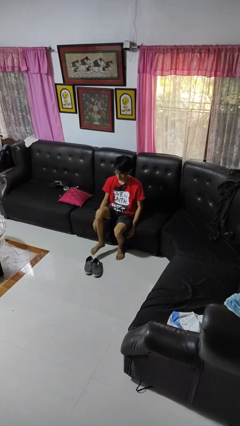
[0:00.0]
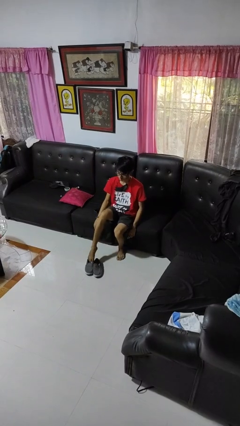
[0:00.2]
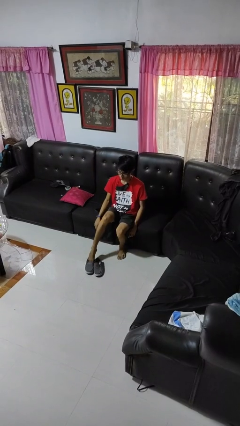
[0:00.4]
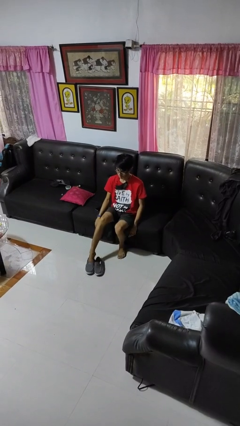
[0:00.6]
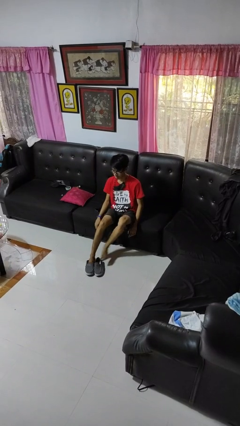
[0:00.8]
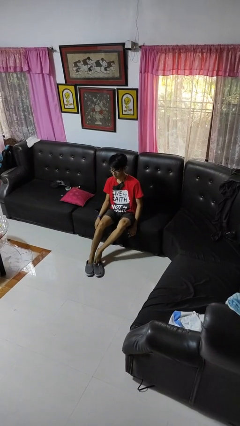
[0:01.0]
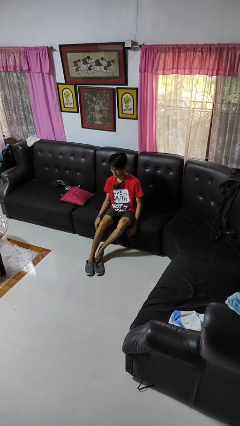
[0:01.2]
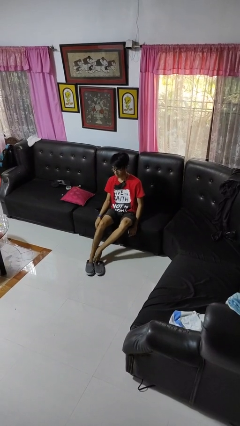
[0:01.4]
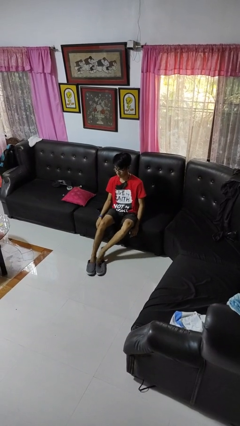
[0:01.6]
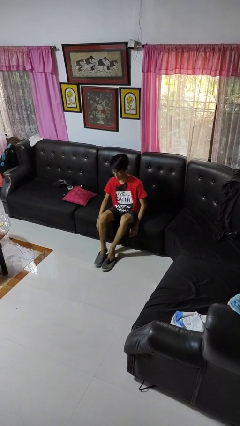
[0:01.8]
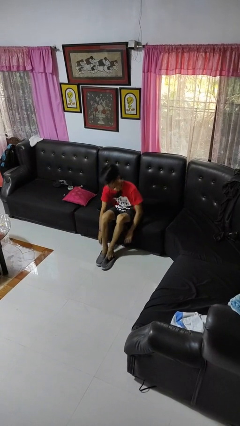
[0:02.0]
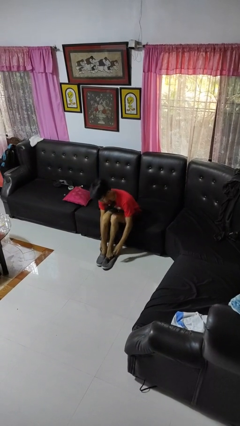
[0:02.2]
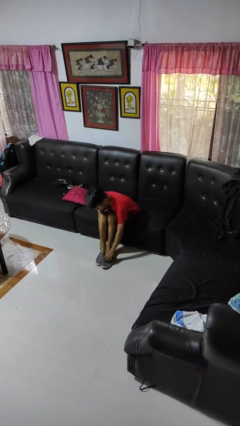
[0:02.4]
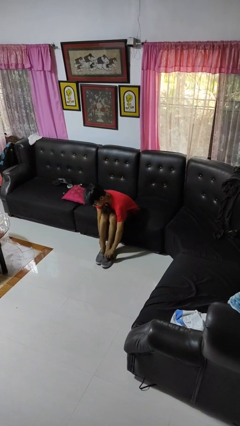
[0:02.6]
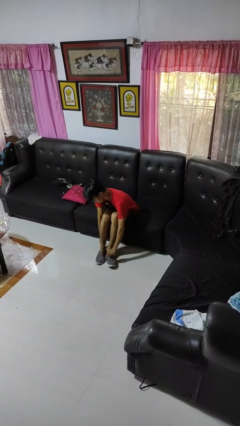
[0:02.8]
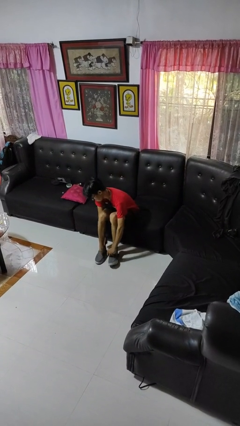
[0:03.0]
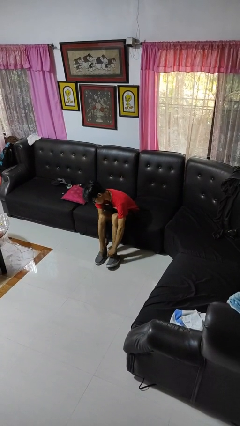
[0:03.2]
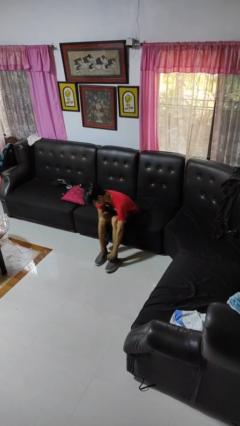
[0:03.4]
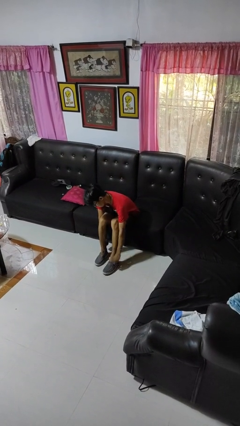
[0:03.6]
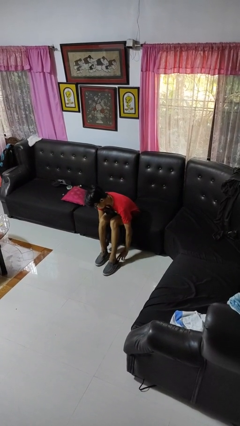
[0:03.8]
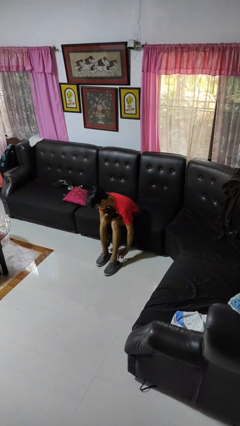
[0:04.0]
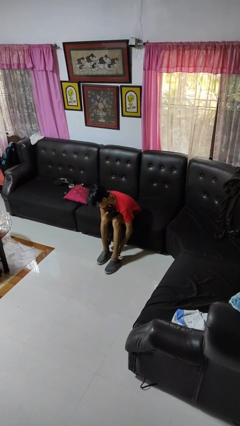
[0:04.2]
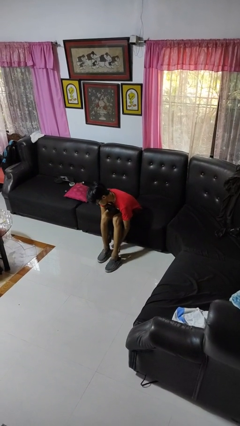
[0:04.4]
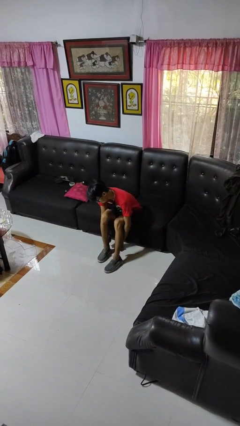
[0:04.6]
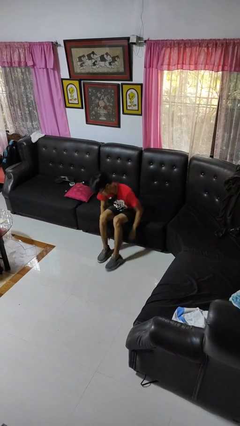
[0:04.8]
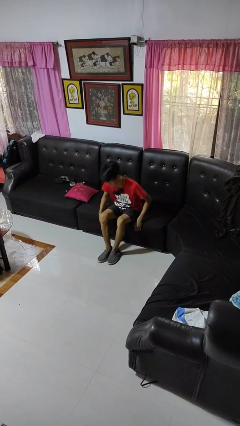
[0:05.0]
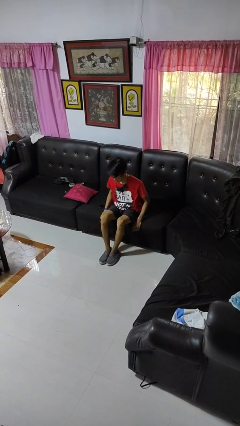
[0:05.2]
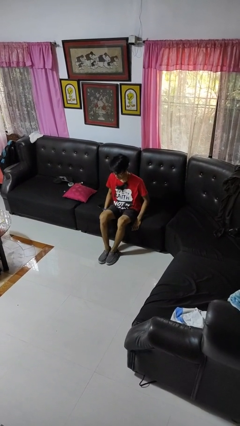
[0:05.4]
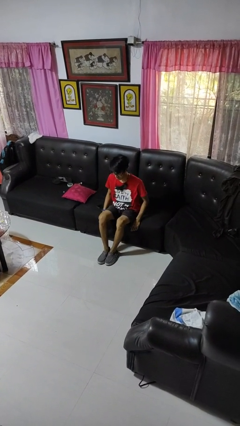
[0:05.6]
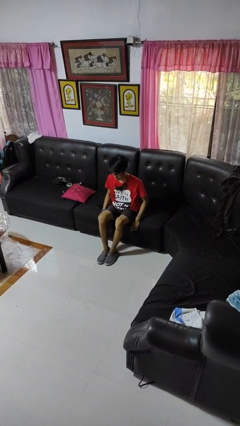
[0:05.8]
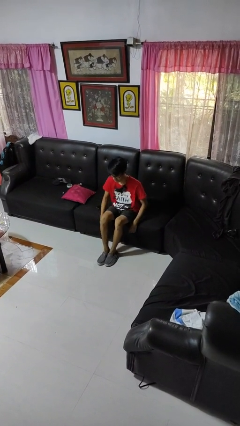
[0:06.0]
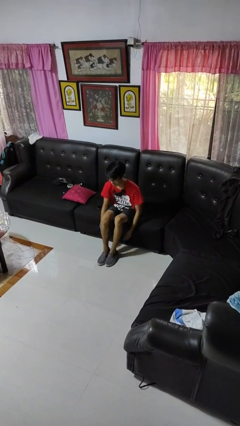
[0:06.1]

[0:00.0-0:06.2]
person puts on shoes

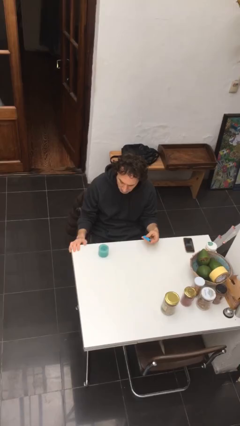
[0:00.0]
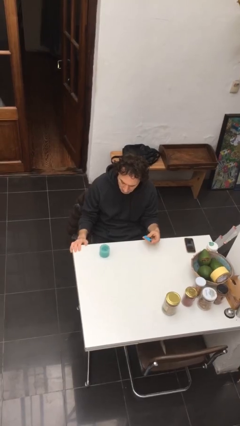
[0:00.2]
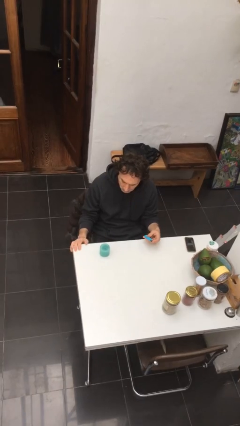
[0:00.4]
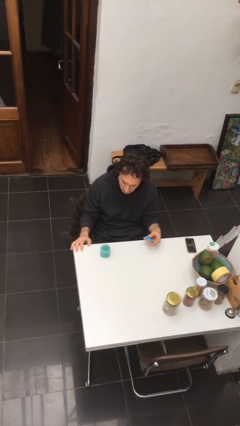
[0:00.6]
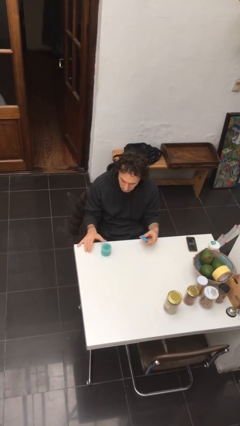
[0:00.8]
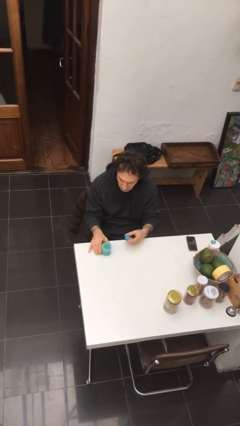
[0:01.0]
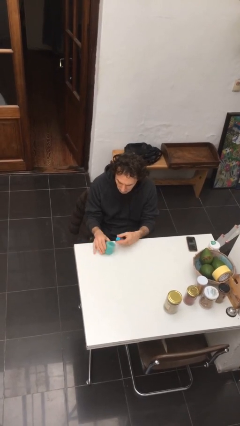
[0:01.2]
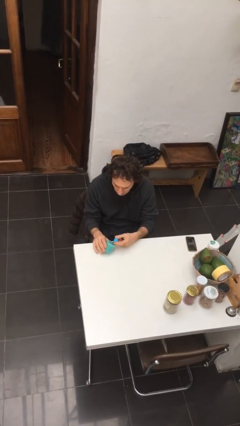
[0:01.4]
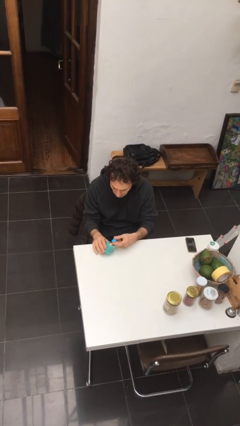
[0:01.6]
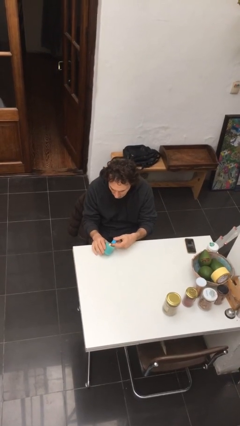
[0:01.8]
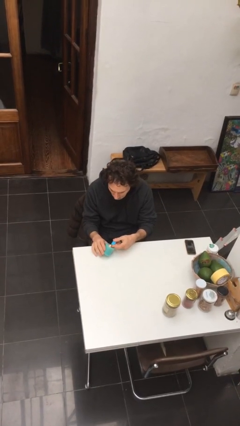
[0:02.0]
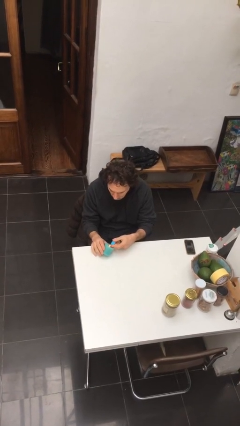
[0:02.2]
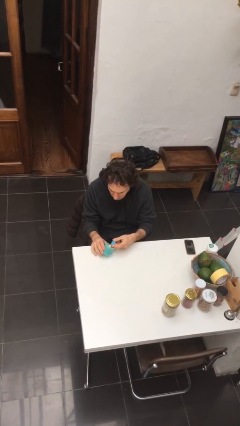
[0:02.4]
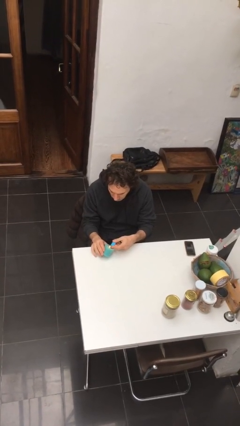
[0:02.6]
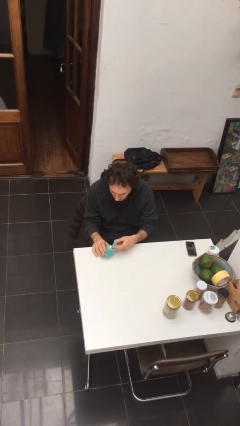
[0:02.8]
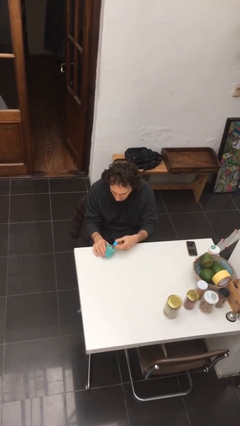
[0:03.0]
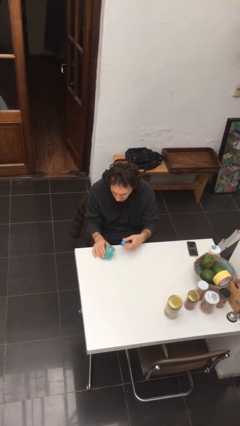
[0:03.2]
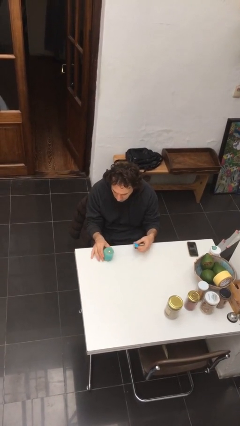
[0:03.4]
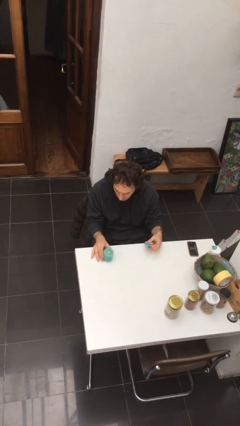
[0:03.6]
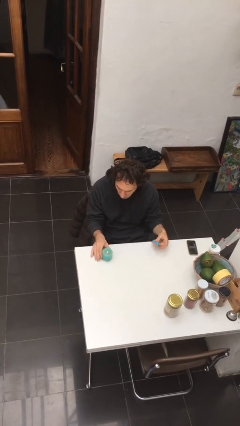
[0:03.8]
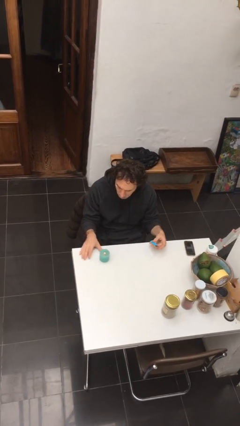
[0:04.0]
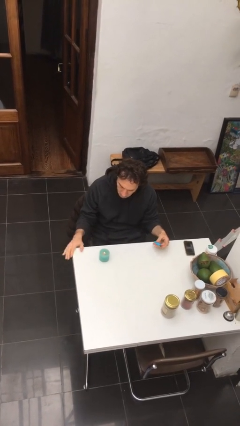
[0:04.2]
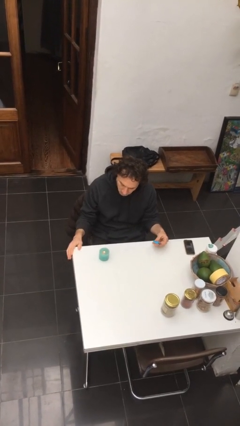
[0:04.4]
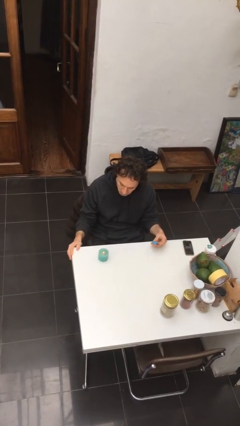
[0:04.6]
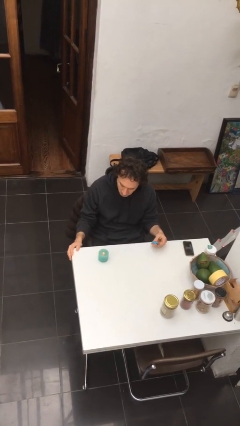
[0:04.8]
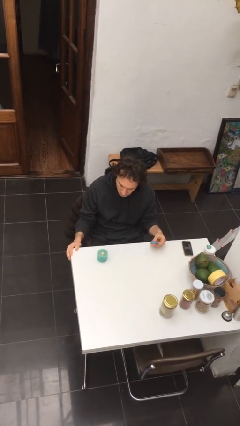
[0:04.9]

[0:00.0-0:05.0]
person lights candle

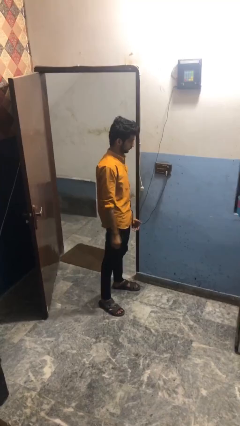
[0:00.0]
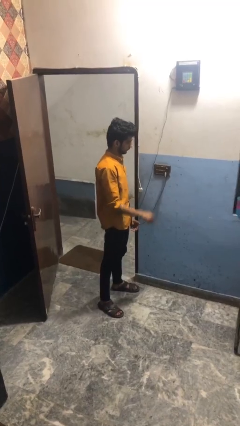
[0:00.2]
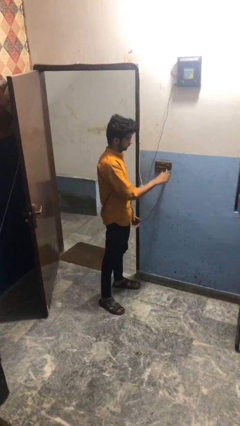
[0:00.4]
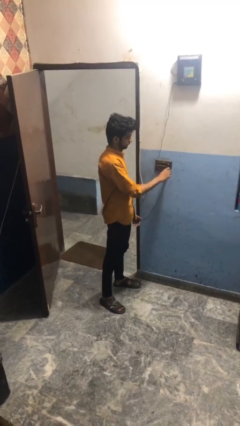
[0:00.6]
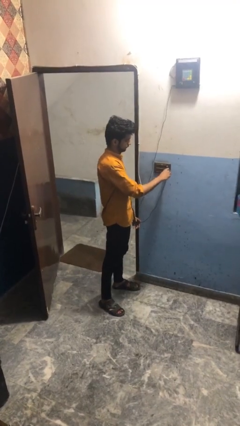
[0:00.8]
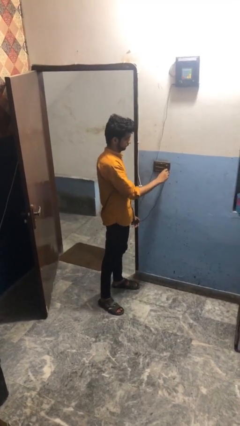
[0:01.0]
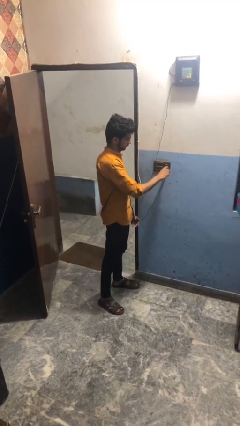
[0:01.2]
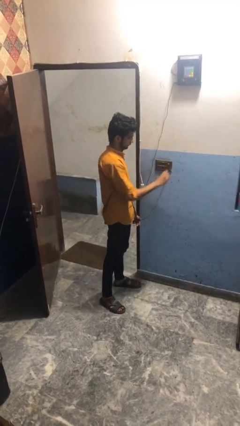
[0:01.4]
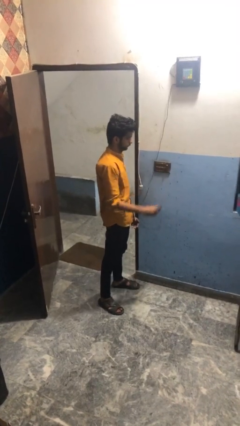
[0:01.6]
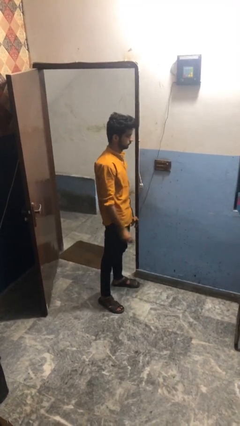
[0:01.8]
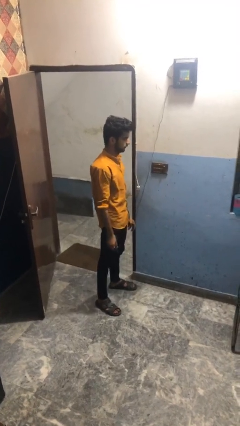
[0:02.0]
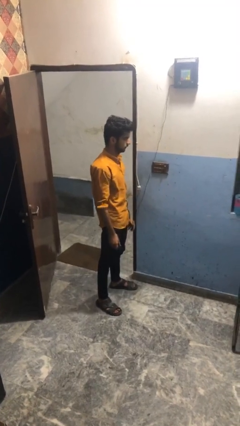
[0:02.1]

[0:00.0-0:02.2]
person unplugs from electrical socket

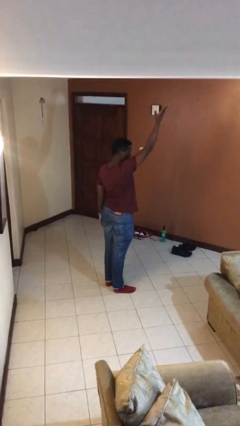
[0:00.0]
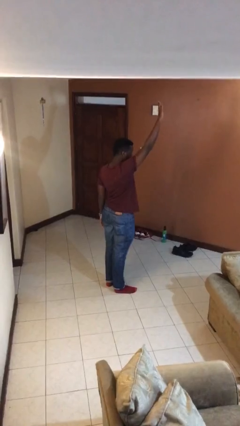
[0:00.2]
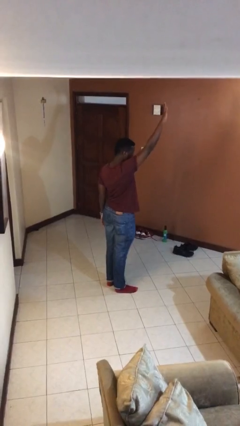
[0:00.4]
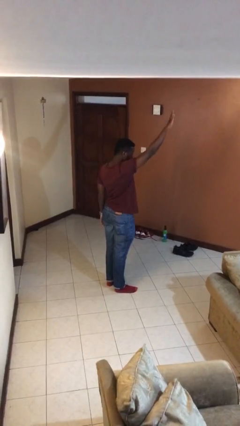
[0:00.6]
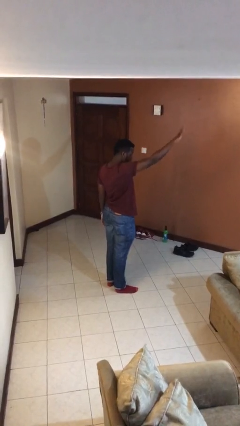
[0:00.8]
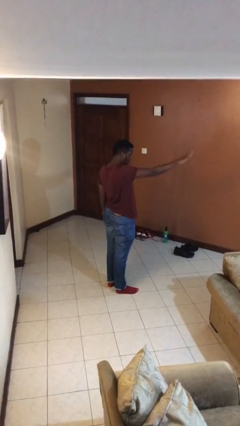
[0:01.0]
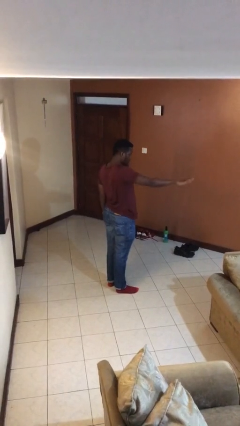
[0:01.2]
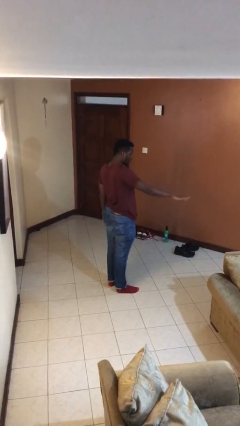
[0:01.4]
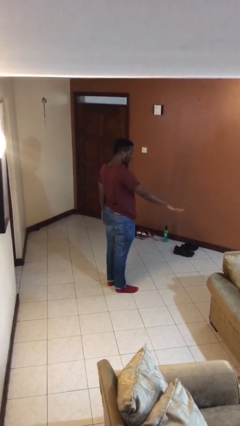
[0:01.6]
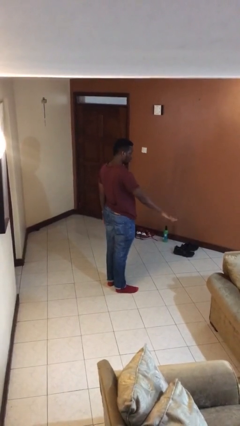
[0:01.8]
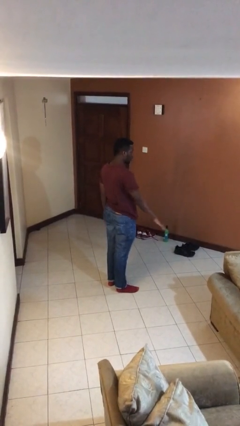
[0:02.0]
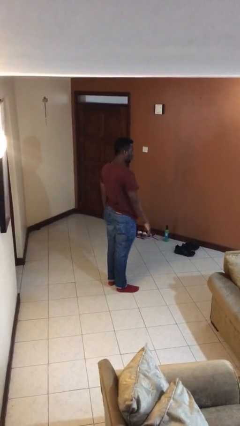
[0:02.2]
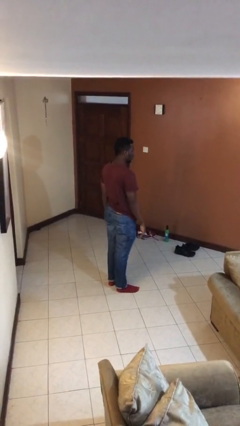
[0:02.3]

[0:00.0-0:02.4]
person gestures swipe down

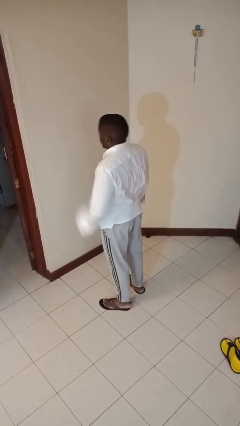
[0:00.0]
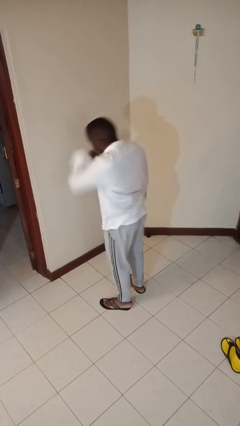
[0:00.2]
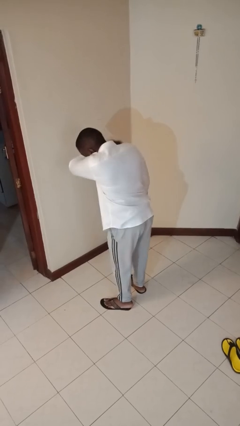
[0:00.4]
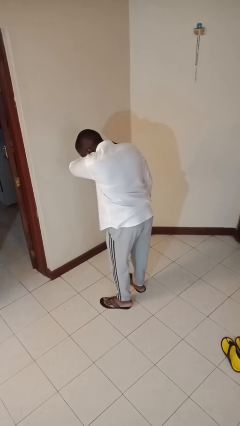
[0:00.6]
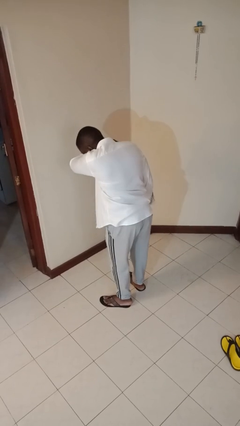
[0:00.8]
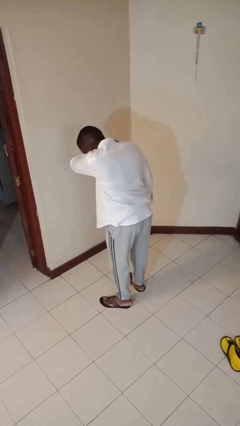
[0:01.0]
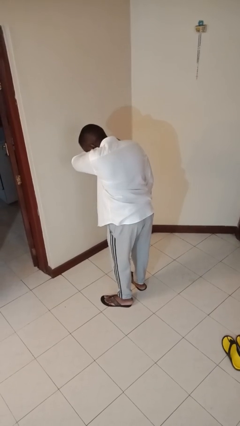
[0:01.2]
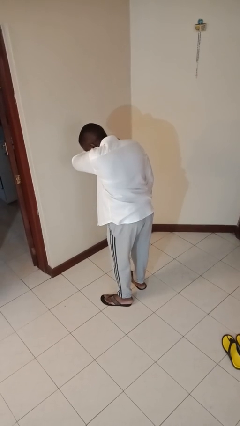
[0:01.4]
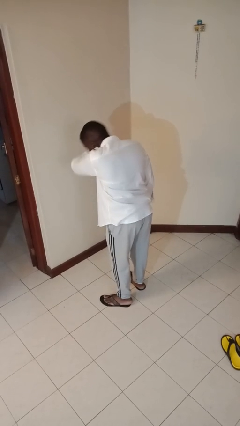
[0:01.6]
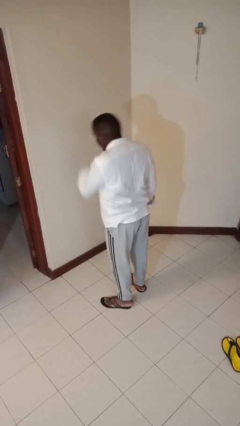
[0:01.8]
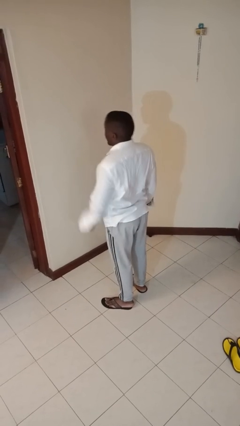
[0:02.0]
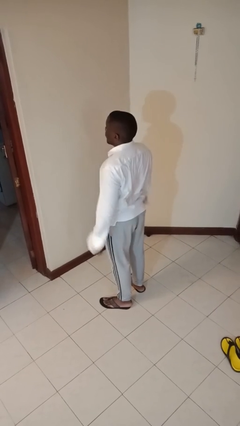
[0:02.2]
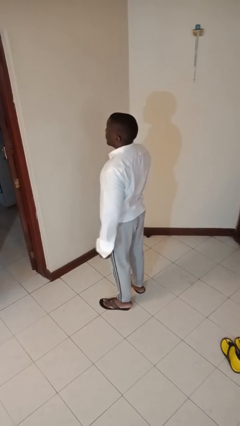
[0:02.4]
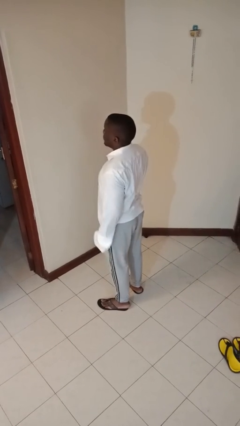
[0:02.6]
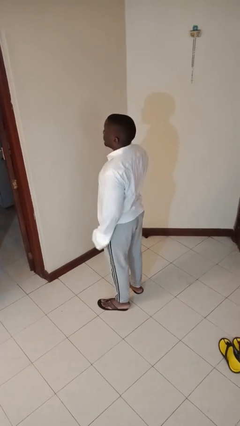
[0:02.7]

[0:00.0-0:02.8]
person sneezes into arm
